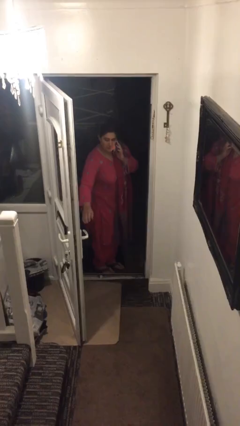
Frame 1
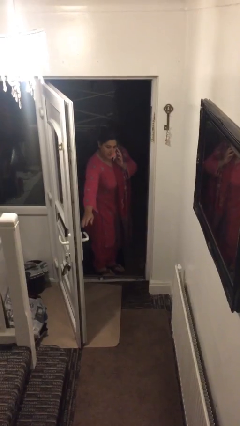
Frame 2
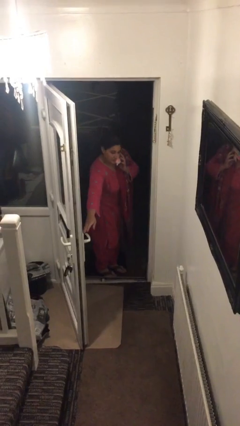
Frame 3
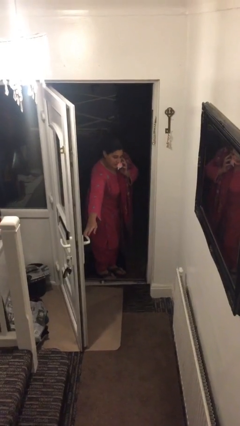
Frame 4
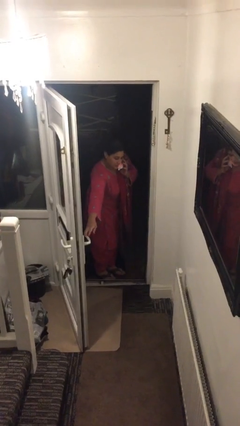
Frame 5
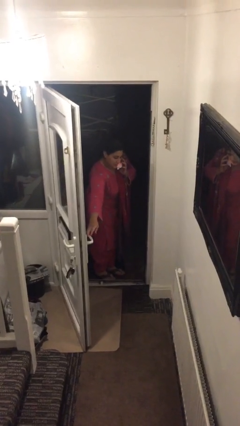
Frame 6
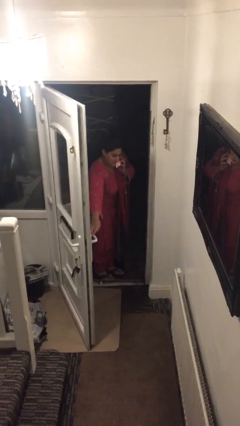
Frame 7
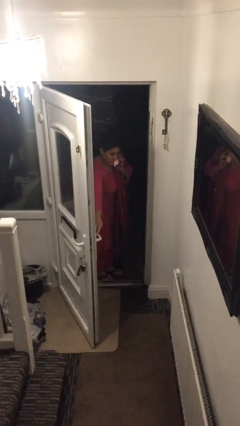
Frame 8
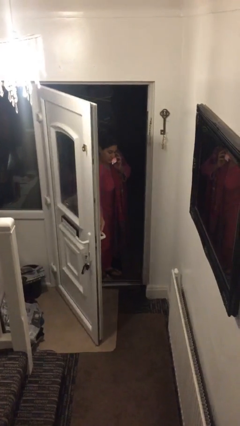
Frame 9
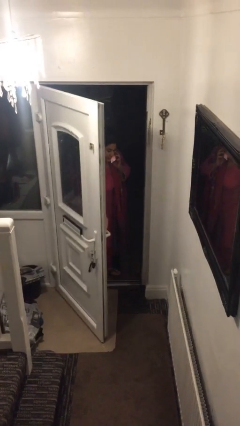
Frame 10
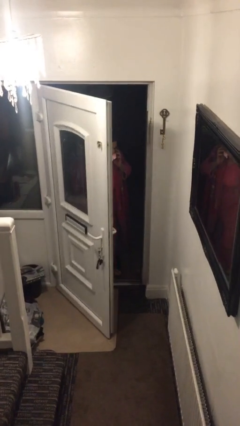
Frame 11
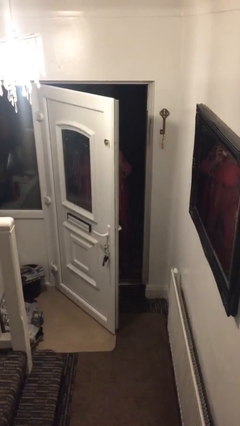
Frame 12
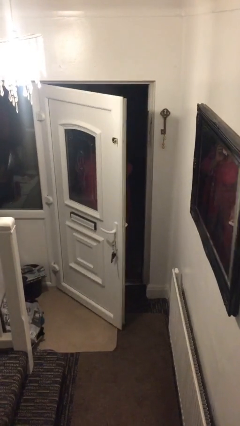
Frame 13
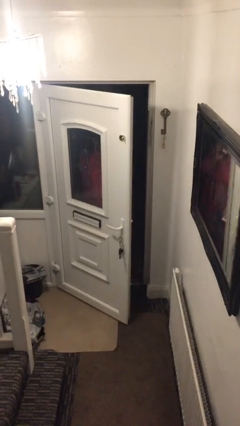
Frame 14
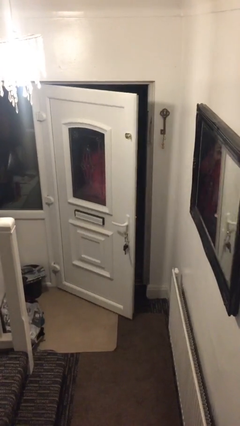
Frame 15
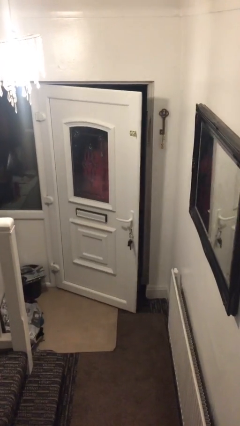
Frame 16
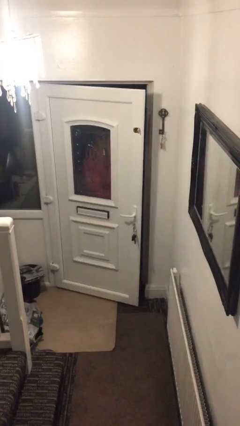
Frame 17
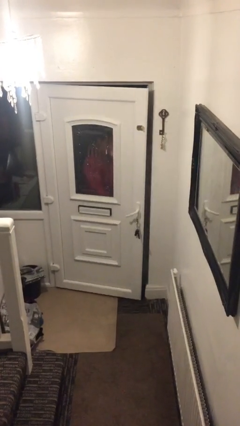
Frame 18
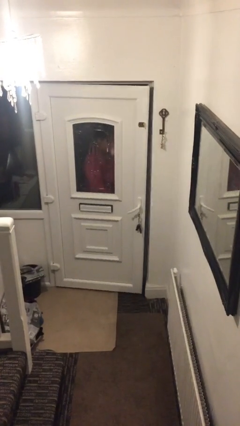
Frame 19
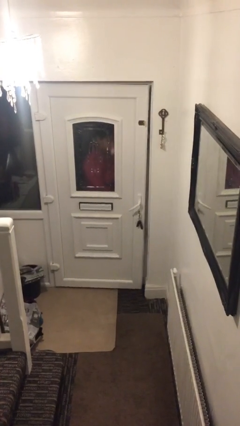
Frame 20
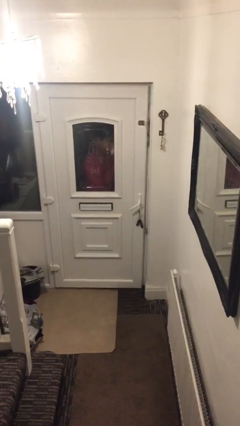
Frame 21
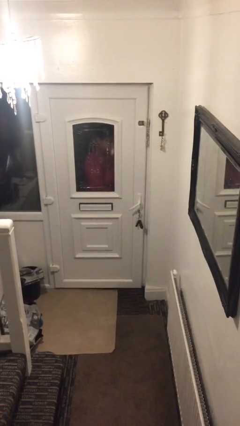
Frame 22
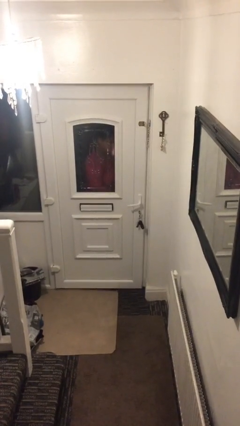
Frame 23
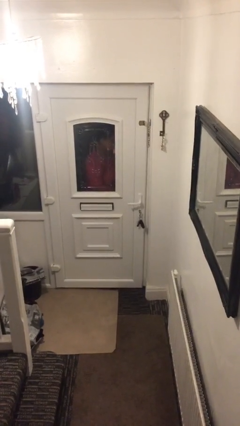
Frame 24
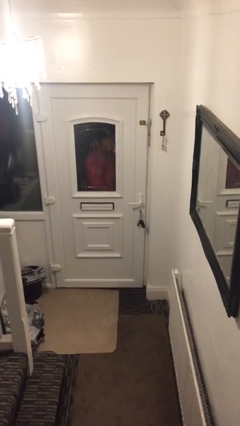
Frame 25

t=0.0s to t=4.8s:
person closes facility door

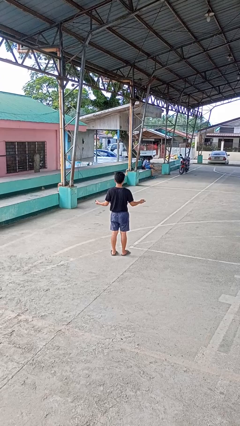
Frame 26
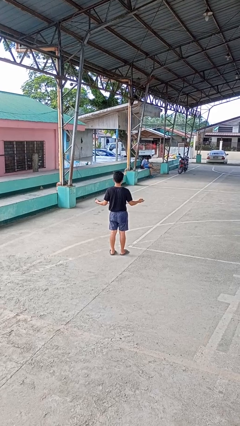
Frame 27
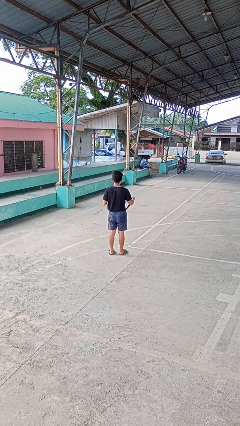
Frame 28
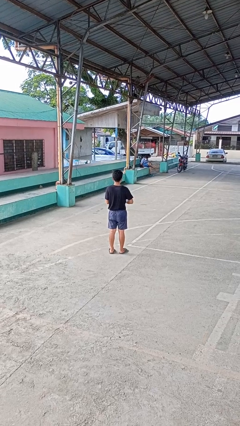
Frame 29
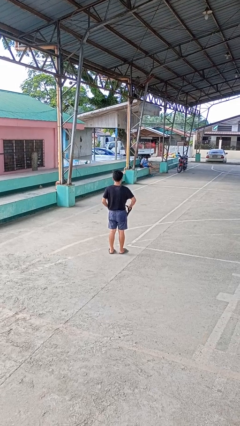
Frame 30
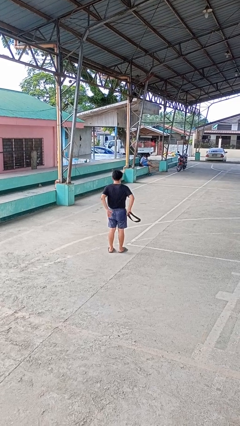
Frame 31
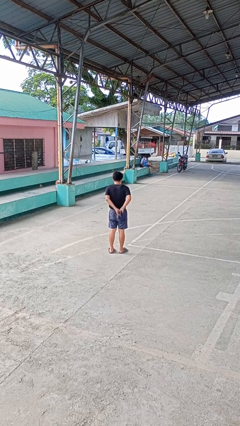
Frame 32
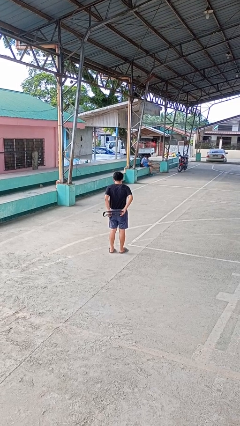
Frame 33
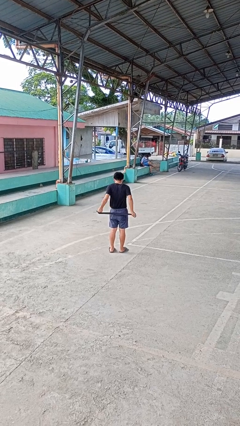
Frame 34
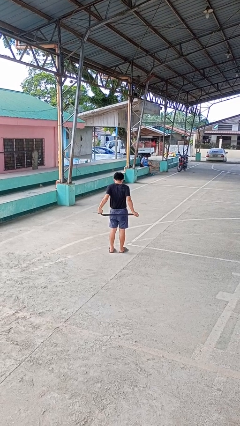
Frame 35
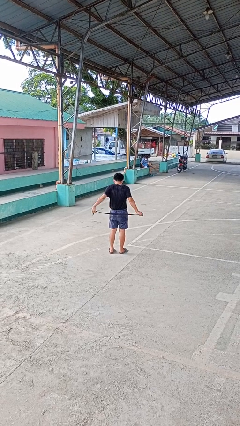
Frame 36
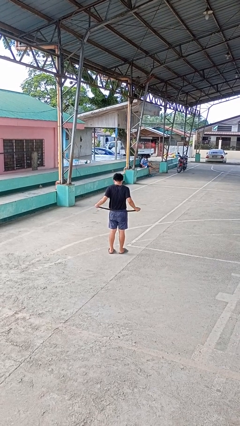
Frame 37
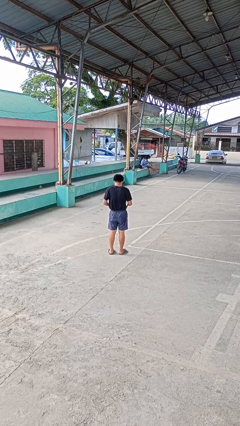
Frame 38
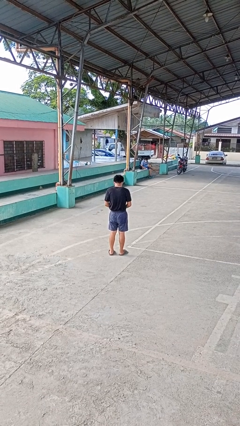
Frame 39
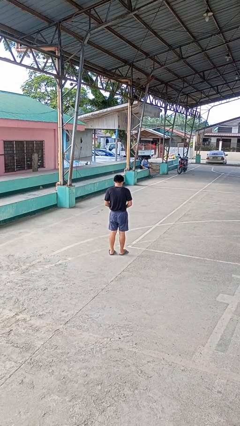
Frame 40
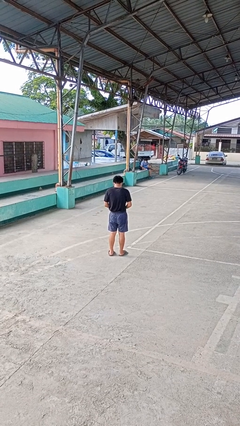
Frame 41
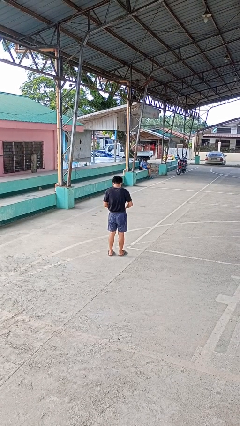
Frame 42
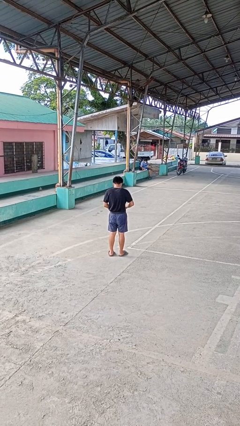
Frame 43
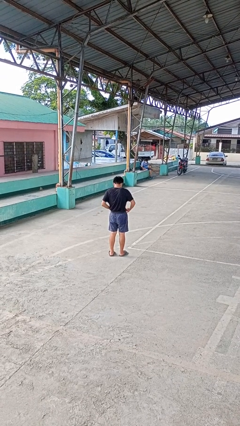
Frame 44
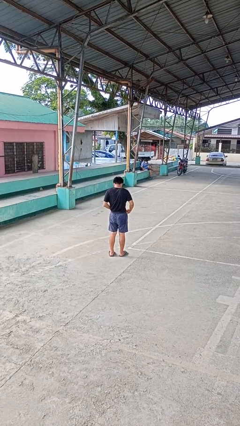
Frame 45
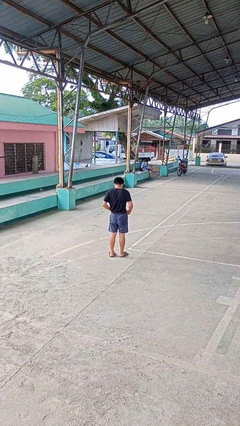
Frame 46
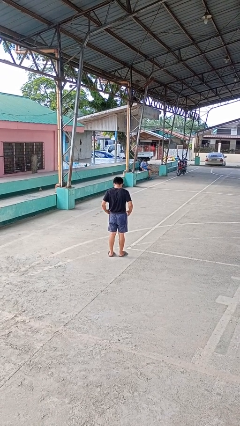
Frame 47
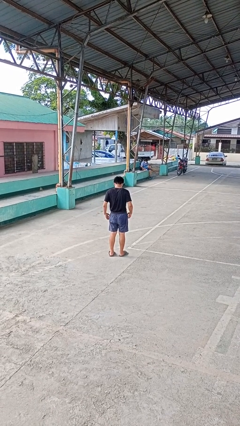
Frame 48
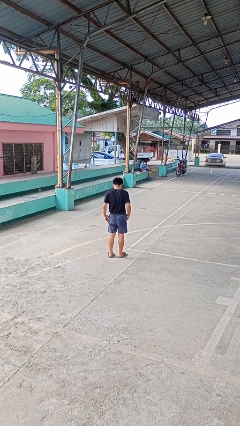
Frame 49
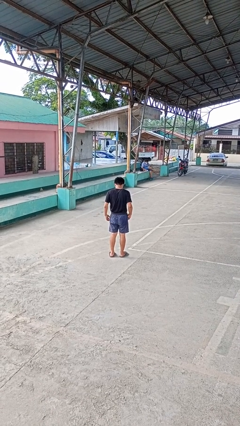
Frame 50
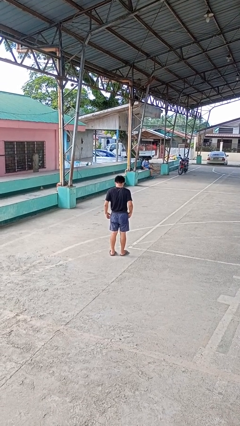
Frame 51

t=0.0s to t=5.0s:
person puts on belt

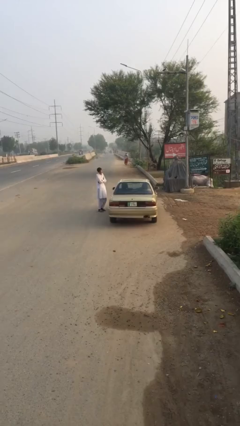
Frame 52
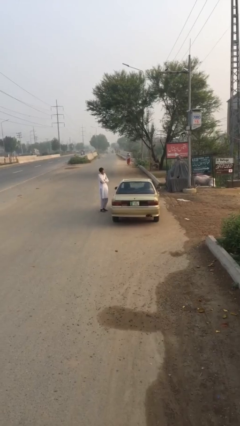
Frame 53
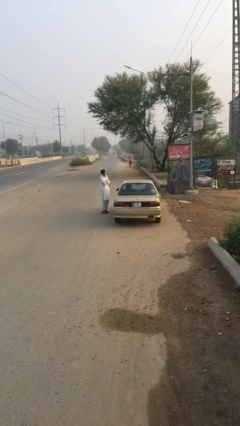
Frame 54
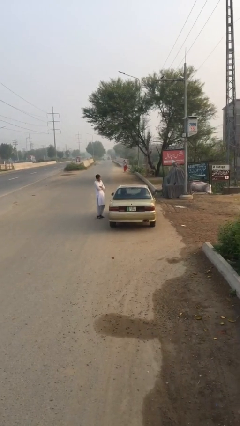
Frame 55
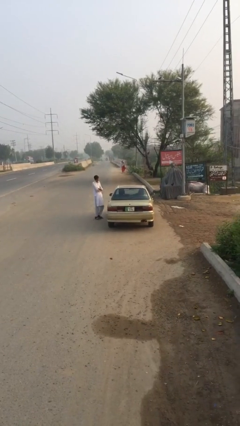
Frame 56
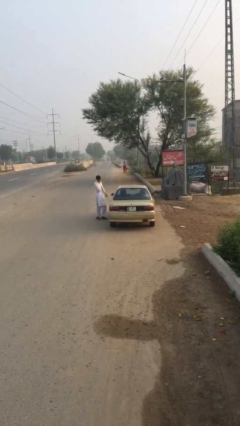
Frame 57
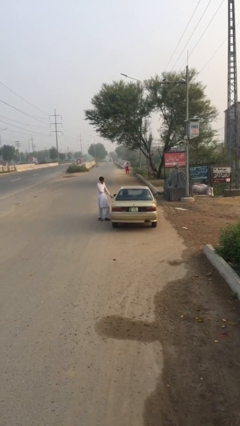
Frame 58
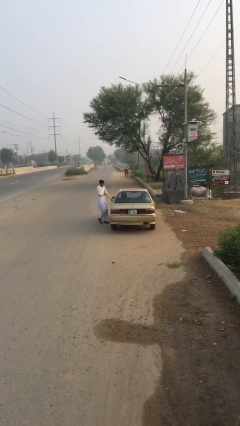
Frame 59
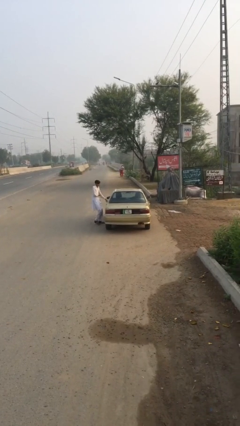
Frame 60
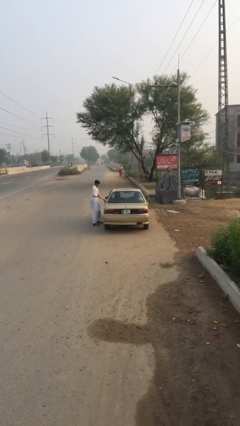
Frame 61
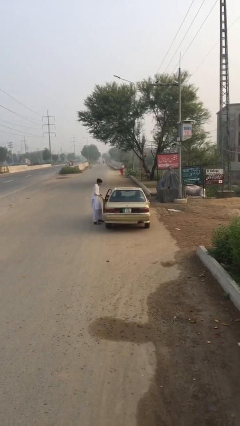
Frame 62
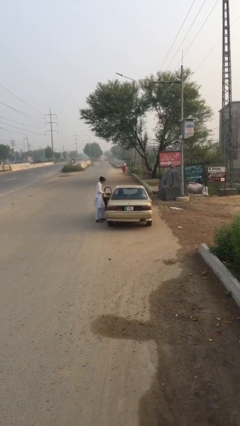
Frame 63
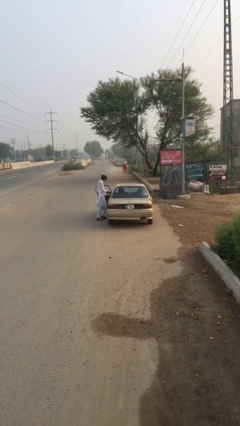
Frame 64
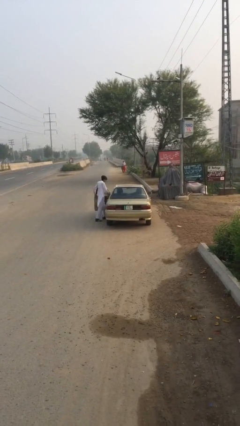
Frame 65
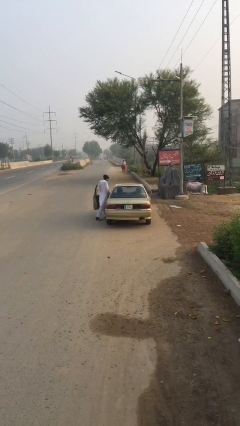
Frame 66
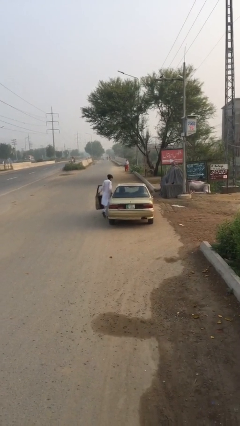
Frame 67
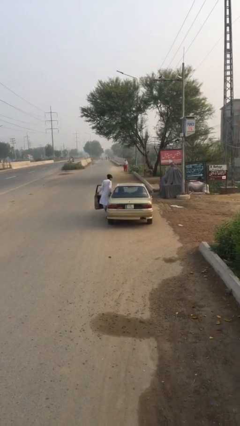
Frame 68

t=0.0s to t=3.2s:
car picks up person

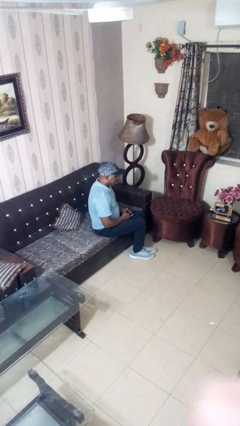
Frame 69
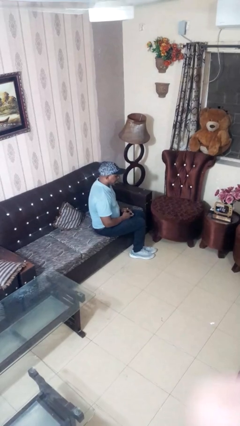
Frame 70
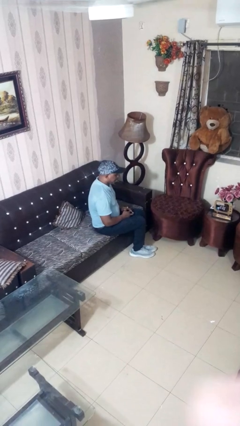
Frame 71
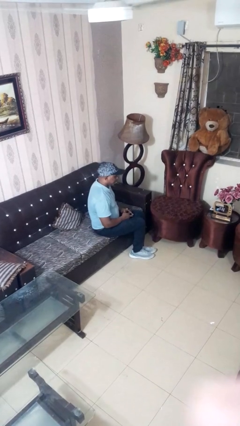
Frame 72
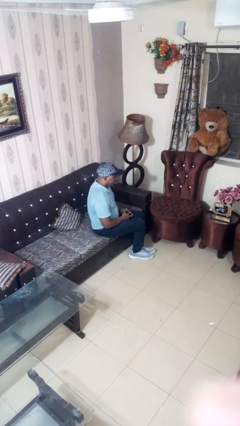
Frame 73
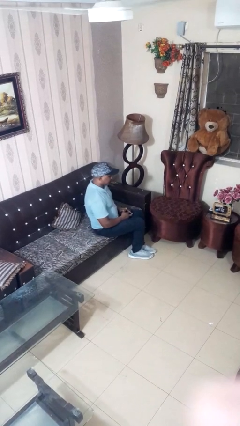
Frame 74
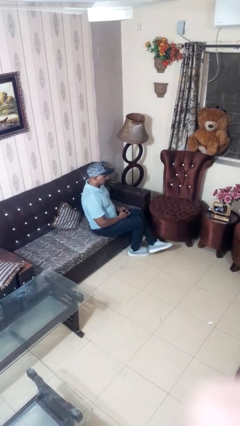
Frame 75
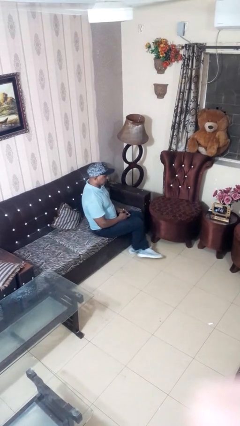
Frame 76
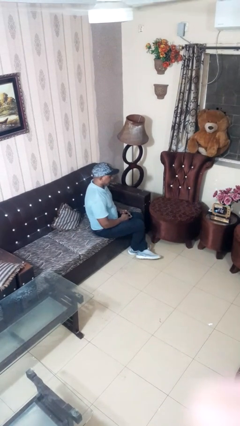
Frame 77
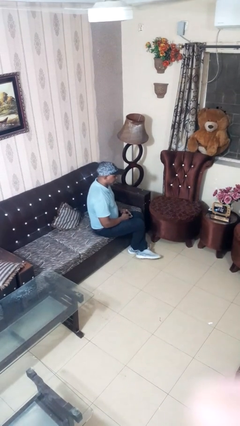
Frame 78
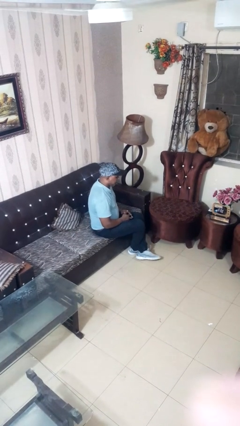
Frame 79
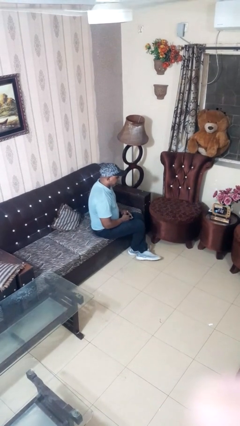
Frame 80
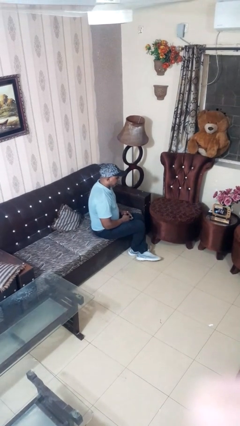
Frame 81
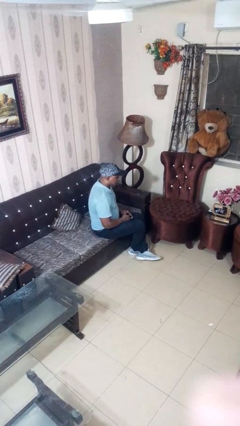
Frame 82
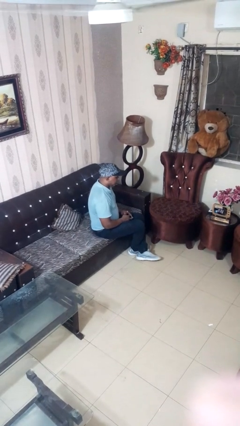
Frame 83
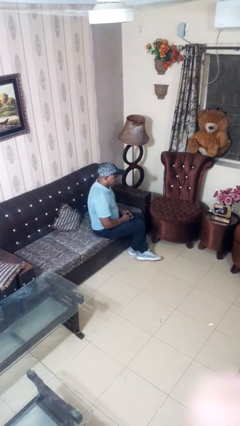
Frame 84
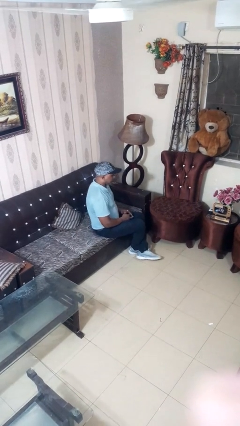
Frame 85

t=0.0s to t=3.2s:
person crosses legs

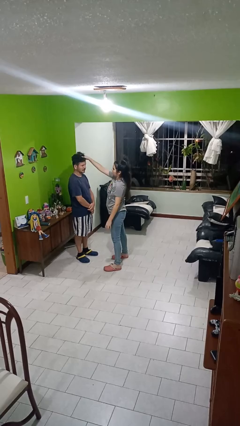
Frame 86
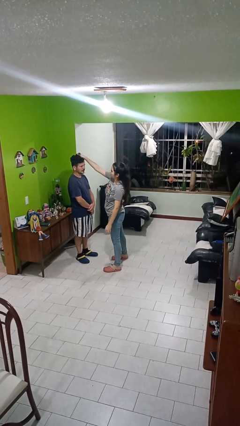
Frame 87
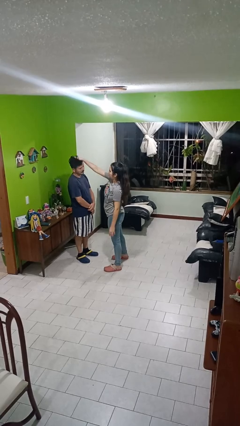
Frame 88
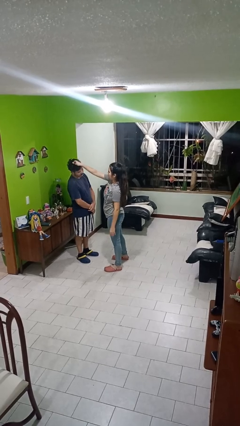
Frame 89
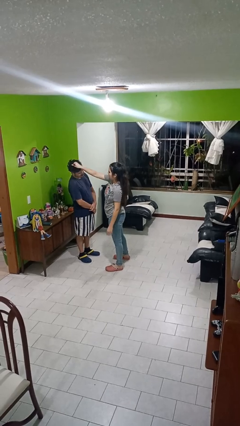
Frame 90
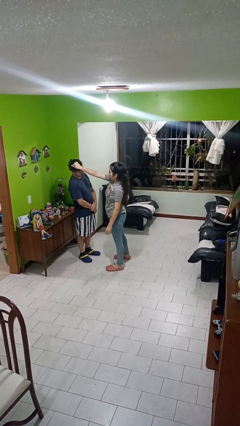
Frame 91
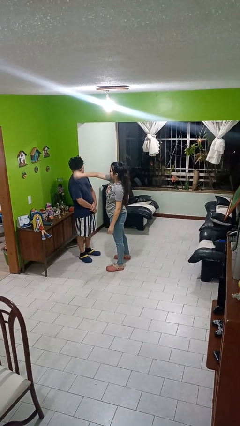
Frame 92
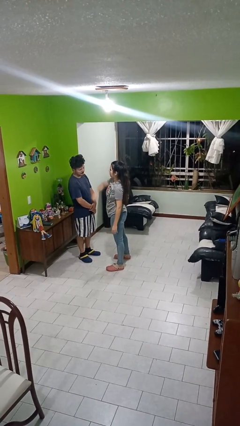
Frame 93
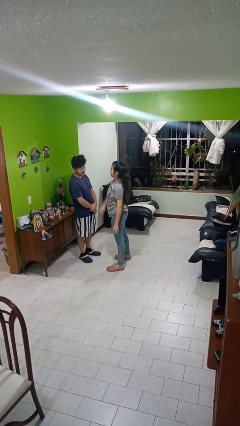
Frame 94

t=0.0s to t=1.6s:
person grabs person by hair
